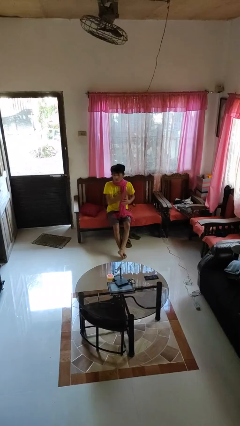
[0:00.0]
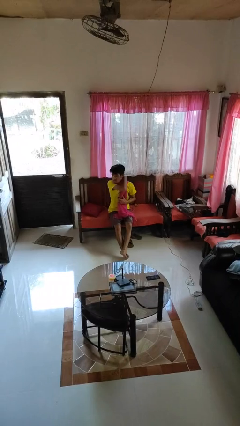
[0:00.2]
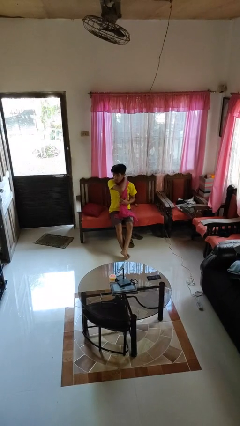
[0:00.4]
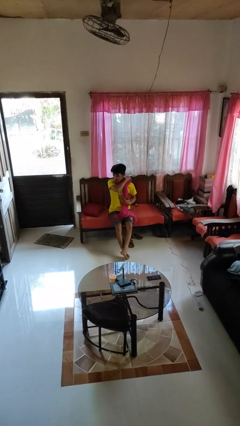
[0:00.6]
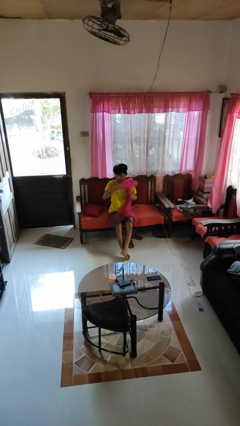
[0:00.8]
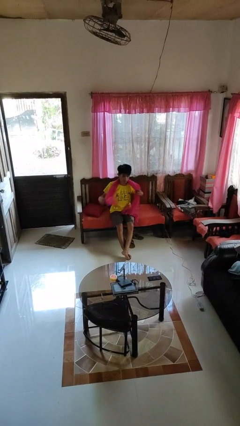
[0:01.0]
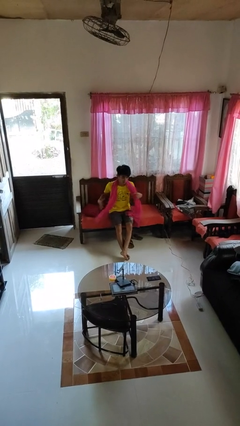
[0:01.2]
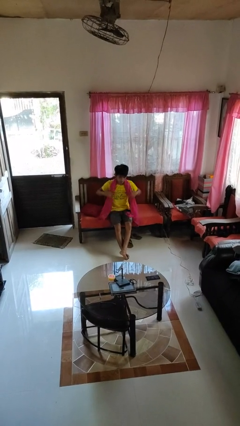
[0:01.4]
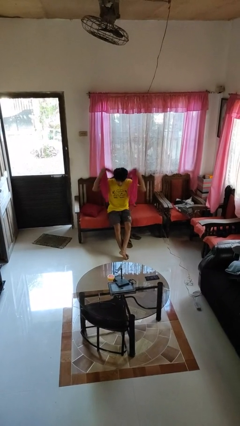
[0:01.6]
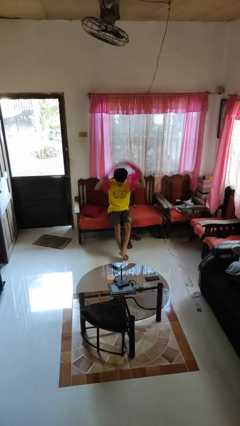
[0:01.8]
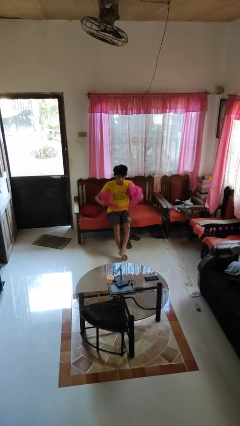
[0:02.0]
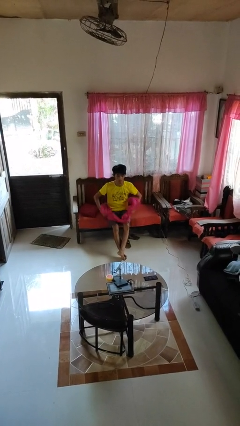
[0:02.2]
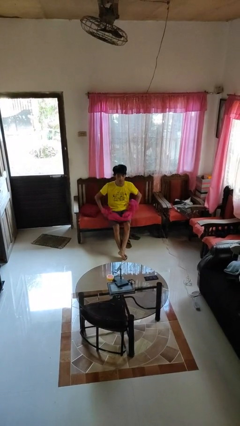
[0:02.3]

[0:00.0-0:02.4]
person takes off scarf

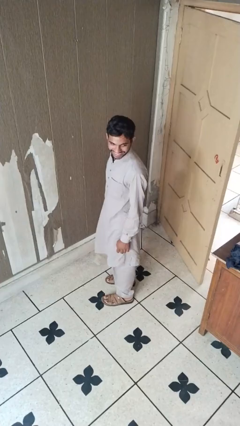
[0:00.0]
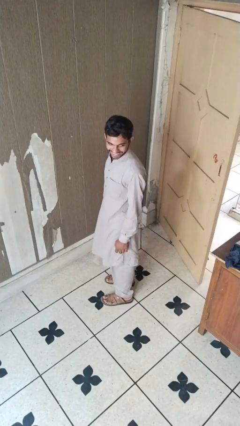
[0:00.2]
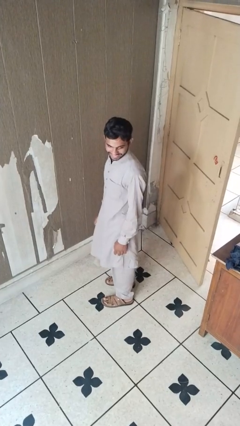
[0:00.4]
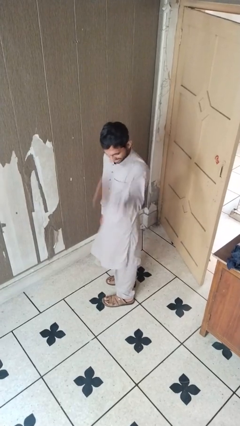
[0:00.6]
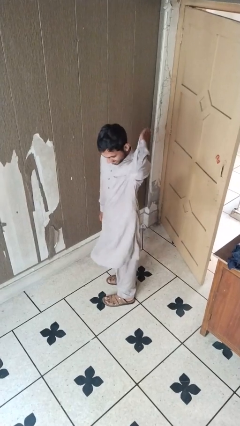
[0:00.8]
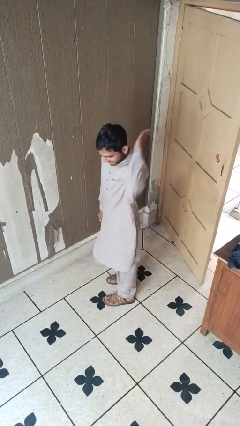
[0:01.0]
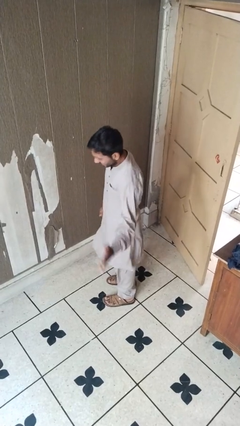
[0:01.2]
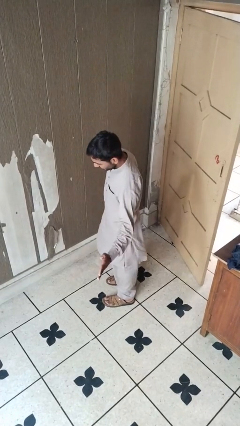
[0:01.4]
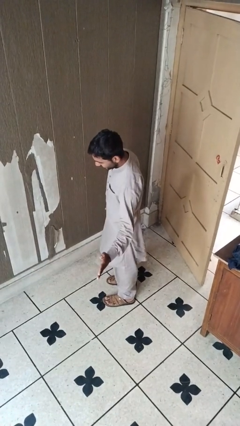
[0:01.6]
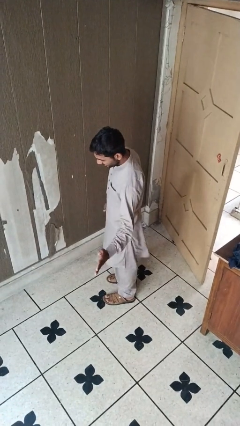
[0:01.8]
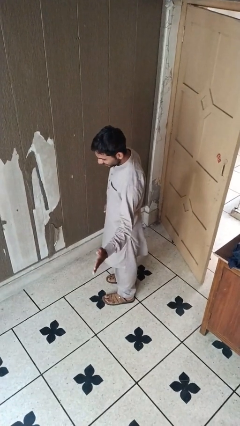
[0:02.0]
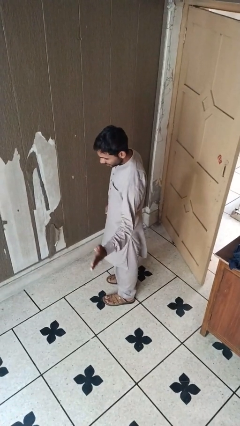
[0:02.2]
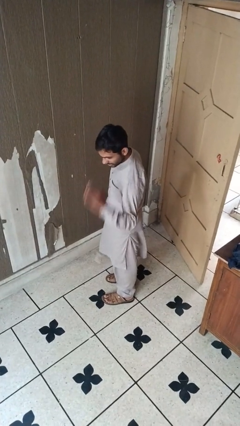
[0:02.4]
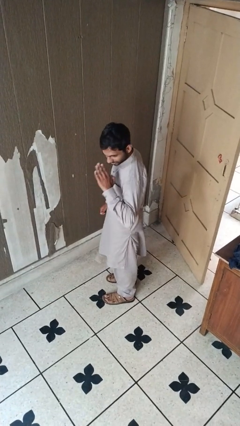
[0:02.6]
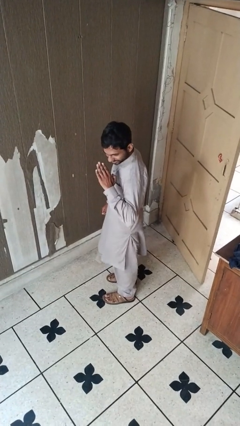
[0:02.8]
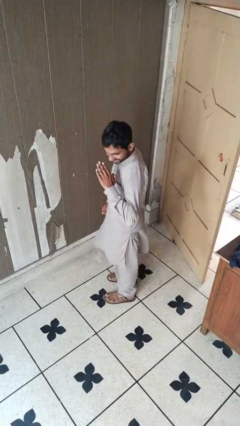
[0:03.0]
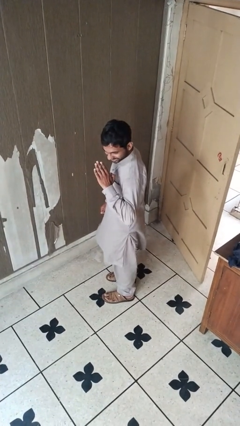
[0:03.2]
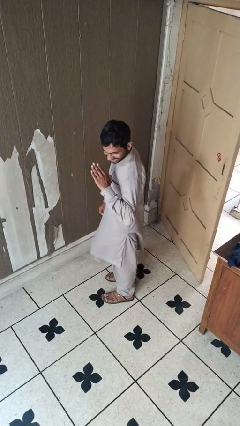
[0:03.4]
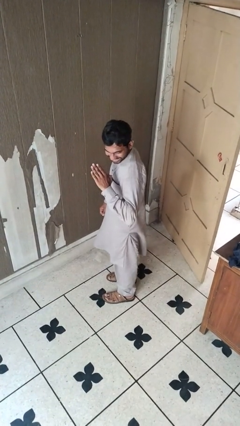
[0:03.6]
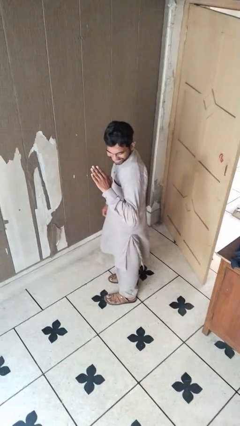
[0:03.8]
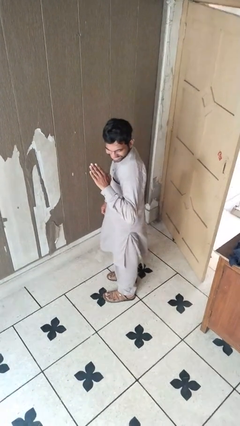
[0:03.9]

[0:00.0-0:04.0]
person karate chop

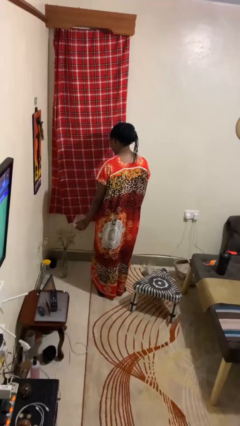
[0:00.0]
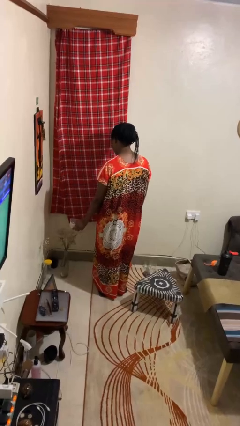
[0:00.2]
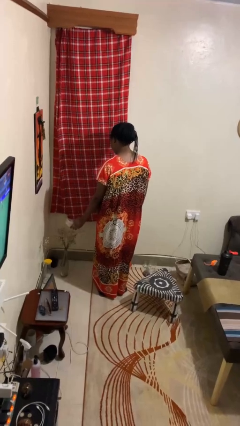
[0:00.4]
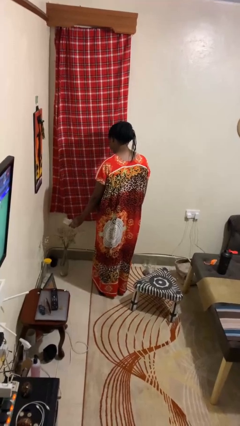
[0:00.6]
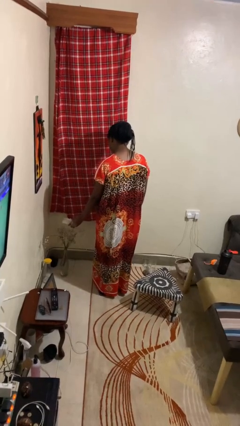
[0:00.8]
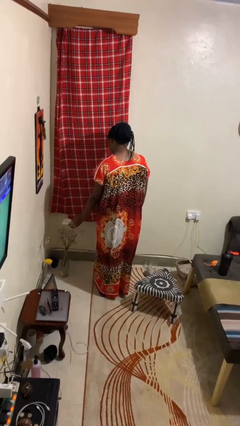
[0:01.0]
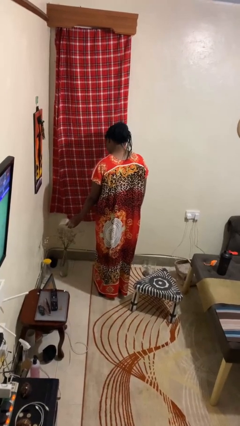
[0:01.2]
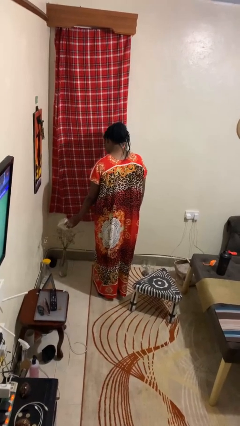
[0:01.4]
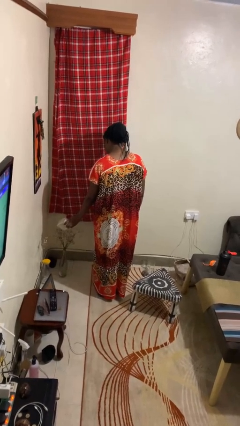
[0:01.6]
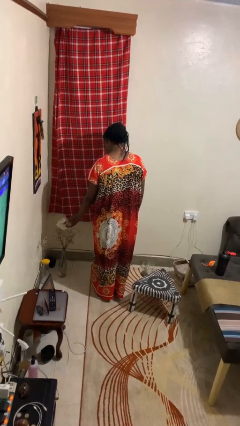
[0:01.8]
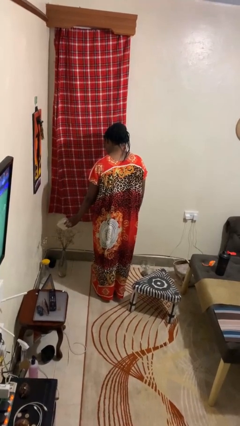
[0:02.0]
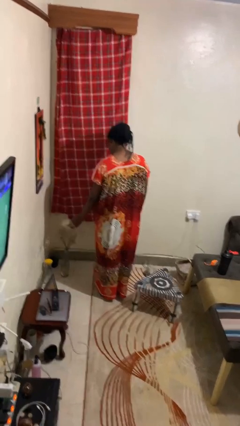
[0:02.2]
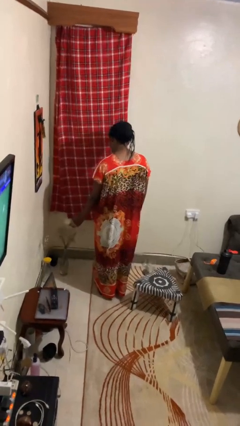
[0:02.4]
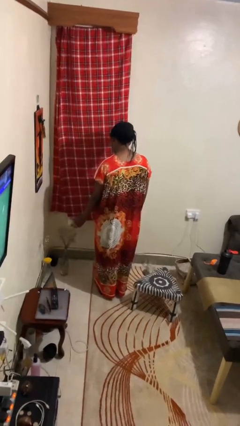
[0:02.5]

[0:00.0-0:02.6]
person waters houseplant

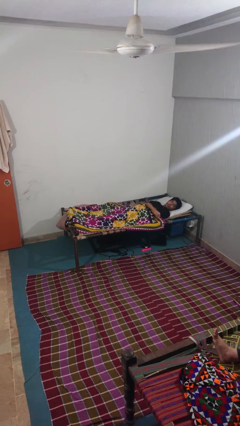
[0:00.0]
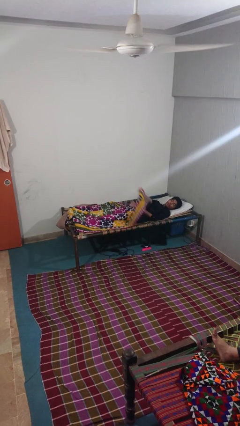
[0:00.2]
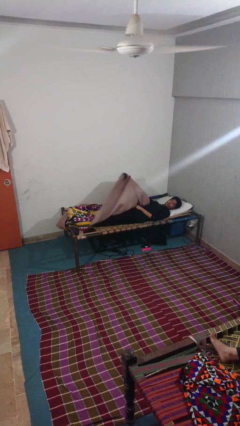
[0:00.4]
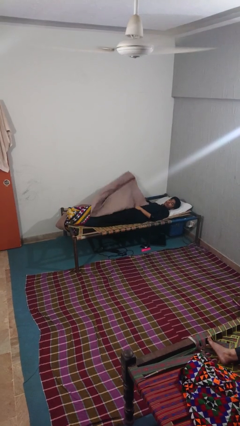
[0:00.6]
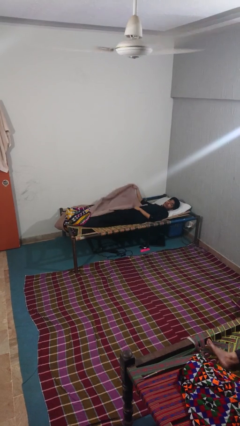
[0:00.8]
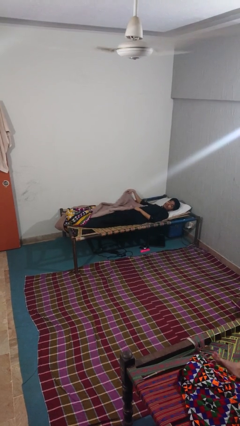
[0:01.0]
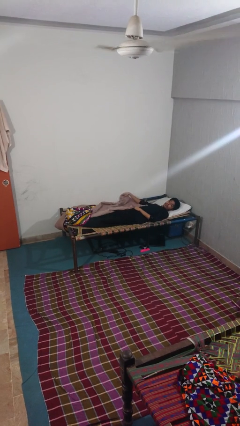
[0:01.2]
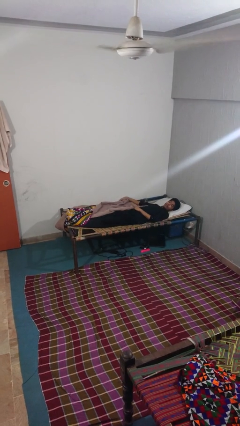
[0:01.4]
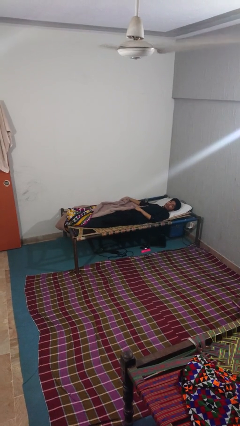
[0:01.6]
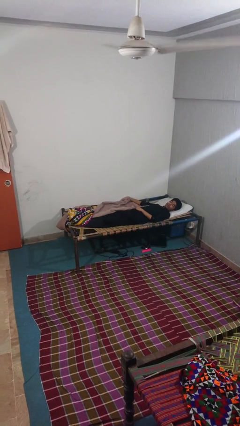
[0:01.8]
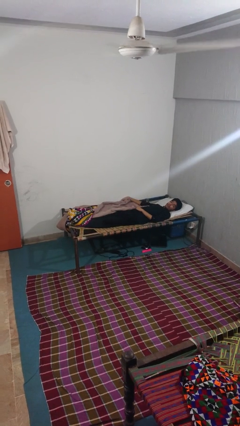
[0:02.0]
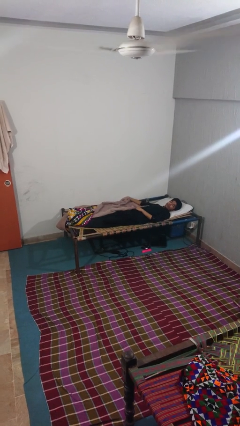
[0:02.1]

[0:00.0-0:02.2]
person uncovers with bedsheets

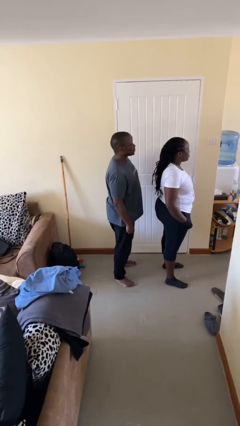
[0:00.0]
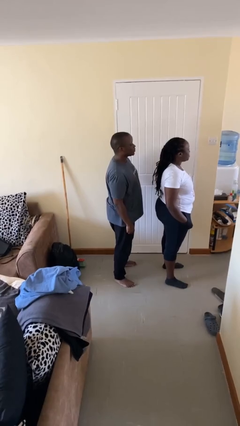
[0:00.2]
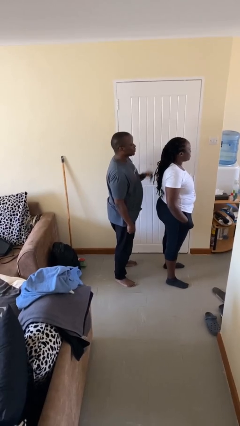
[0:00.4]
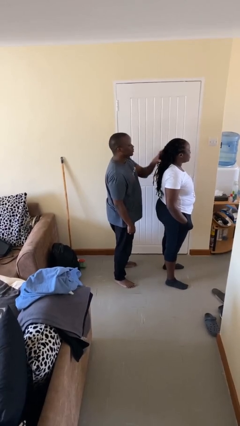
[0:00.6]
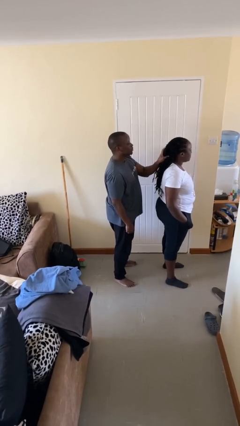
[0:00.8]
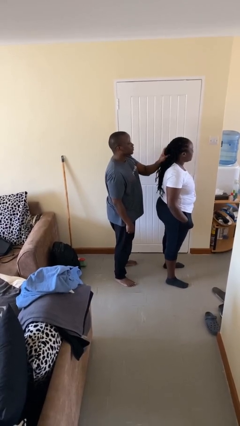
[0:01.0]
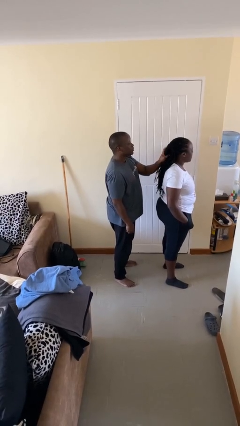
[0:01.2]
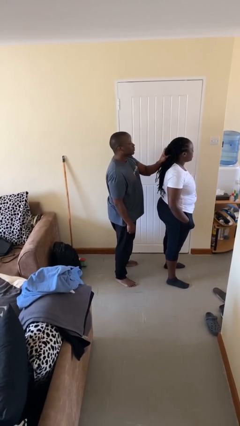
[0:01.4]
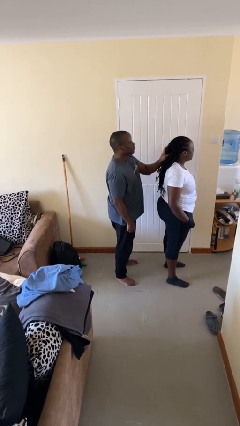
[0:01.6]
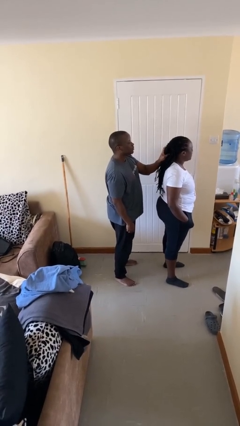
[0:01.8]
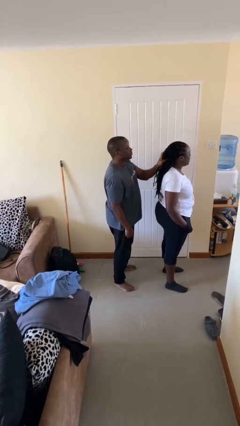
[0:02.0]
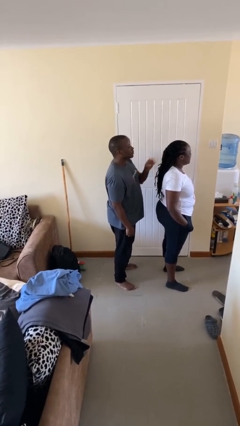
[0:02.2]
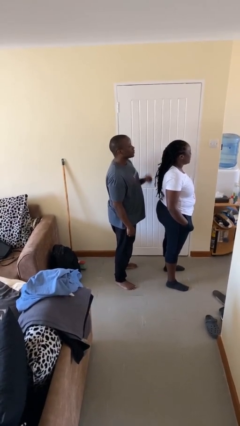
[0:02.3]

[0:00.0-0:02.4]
person grabs person by hair

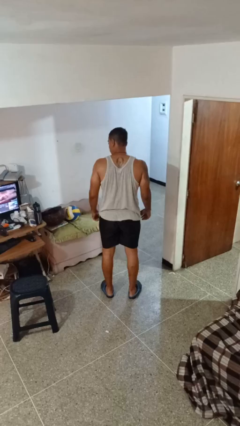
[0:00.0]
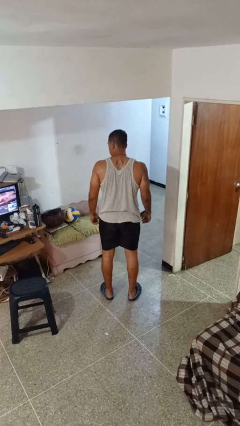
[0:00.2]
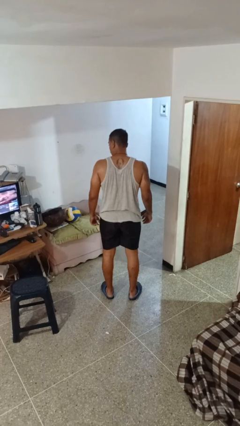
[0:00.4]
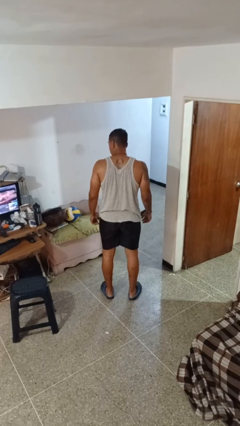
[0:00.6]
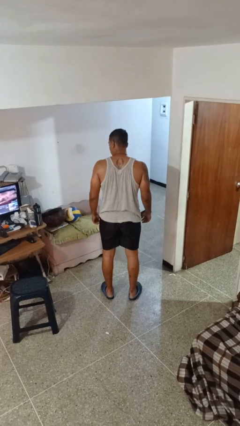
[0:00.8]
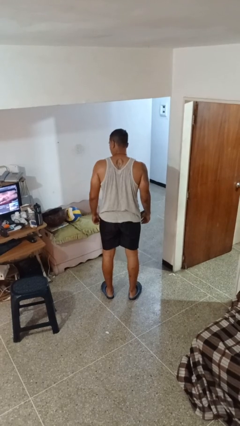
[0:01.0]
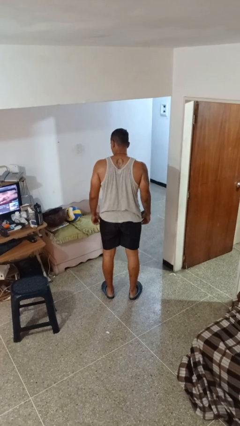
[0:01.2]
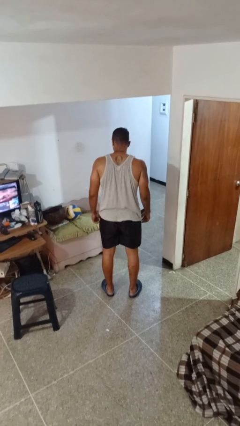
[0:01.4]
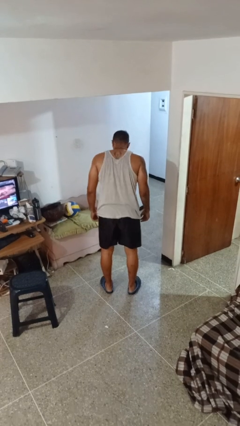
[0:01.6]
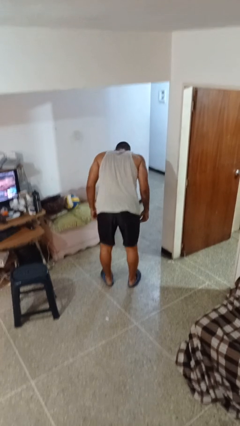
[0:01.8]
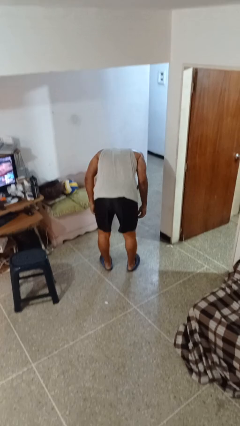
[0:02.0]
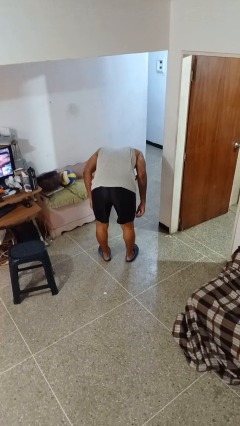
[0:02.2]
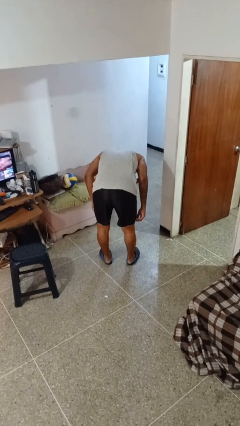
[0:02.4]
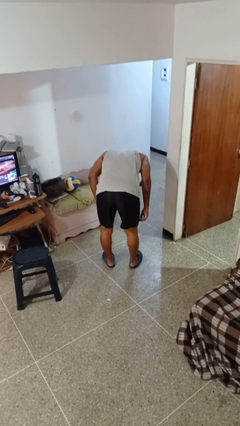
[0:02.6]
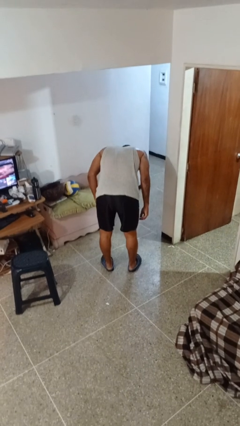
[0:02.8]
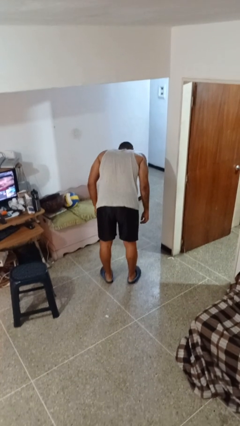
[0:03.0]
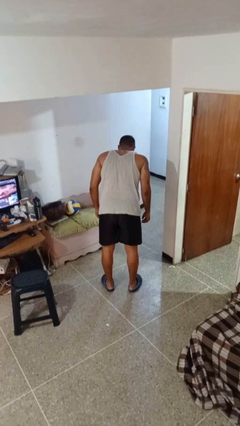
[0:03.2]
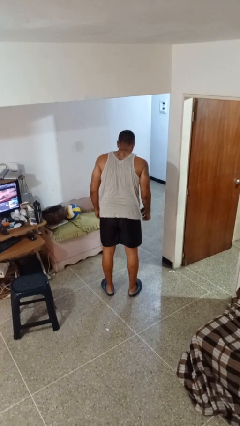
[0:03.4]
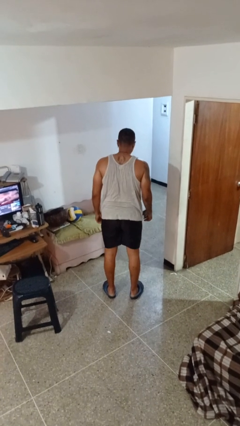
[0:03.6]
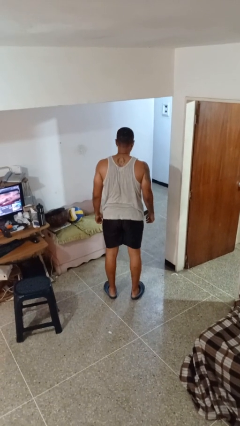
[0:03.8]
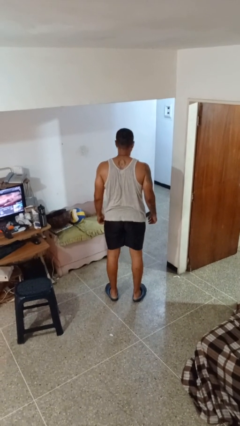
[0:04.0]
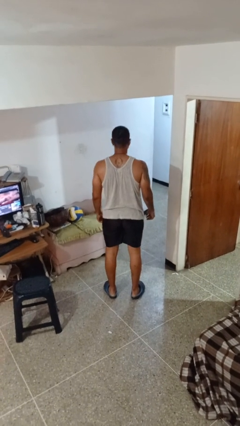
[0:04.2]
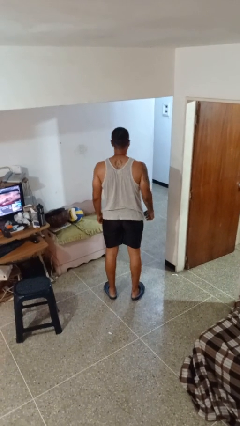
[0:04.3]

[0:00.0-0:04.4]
person bows
